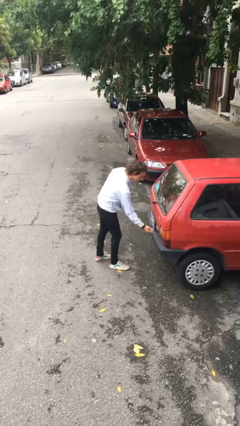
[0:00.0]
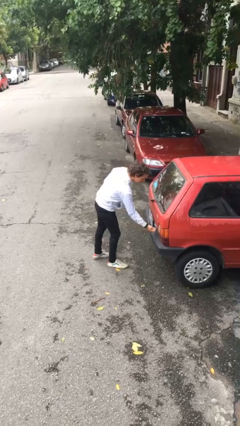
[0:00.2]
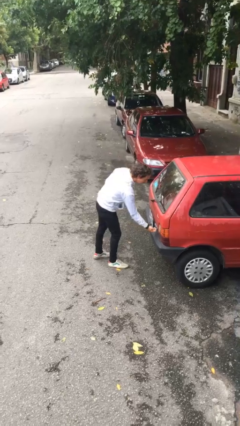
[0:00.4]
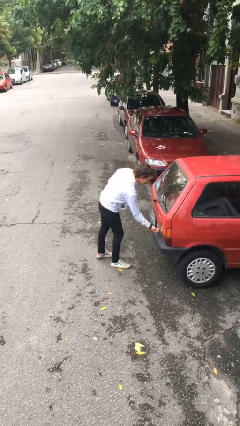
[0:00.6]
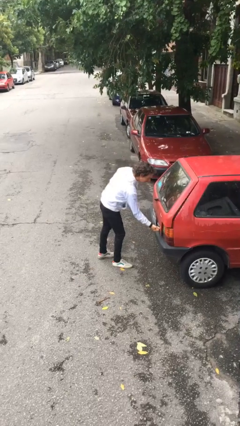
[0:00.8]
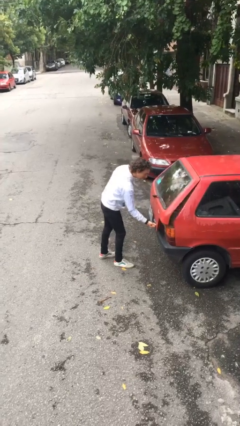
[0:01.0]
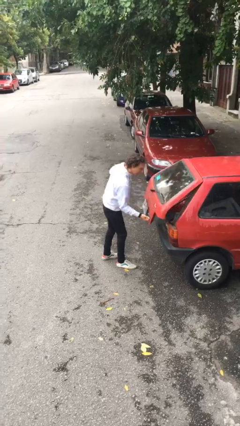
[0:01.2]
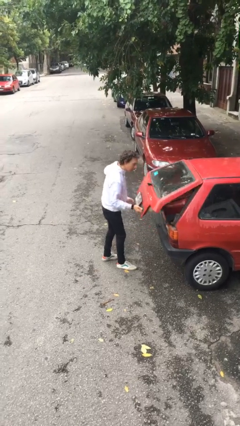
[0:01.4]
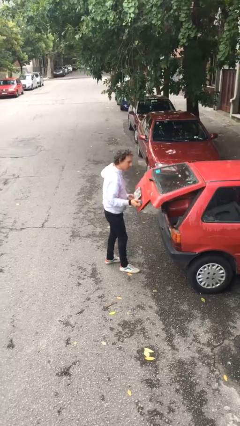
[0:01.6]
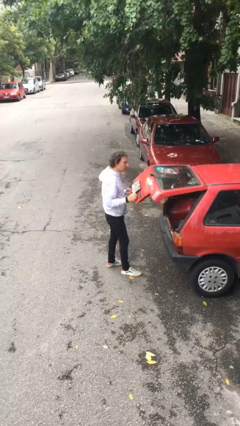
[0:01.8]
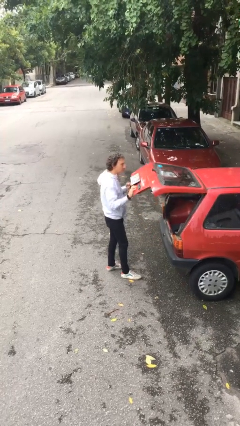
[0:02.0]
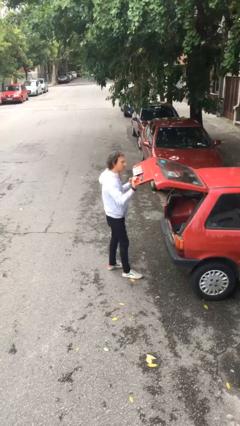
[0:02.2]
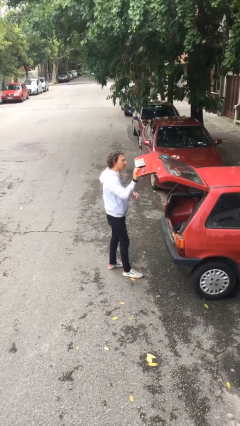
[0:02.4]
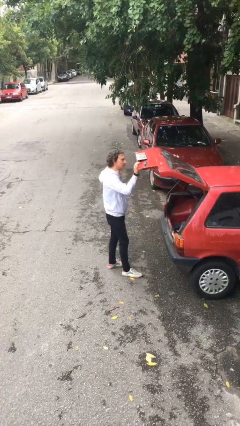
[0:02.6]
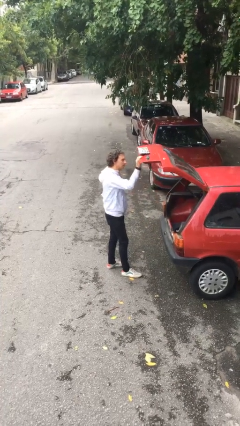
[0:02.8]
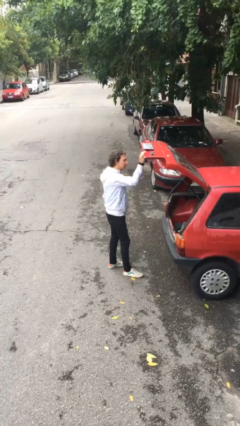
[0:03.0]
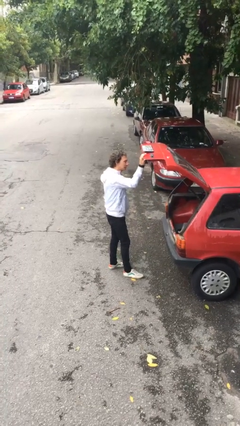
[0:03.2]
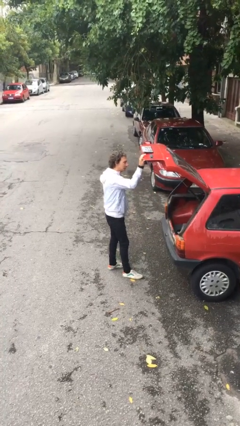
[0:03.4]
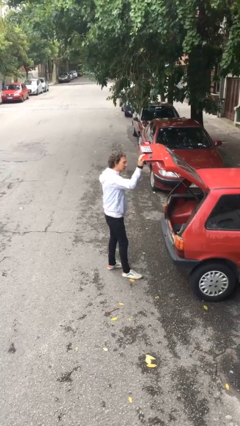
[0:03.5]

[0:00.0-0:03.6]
person opens car trunk

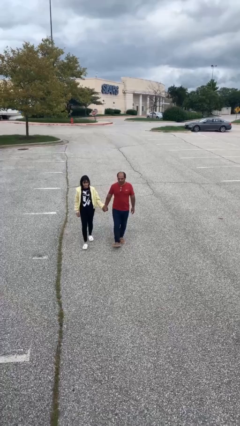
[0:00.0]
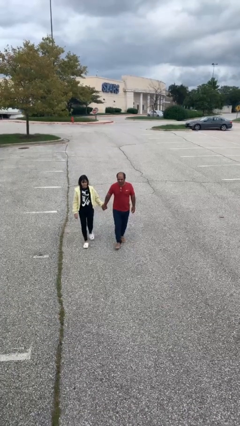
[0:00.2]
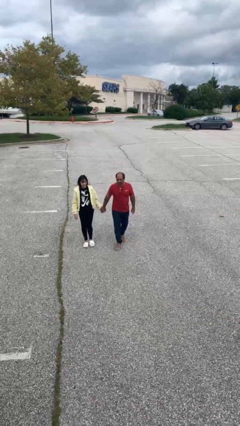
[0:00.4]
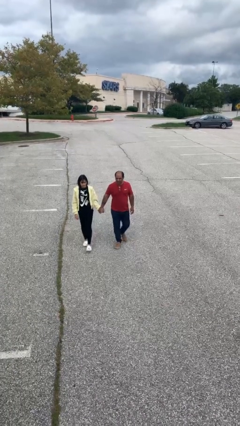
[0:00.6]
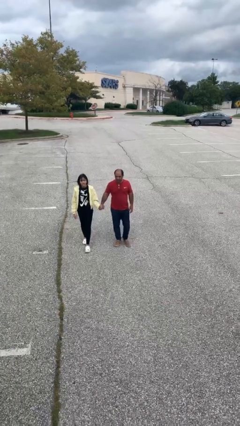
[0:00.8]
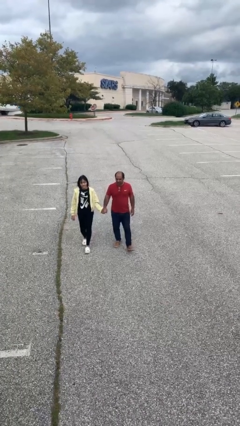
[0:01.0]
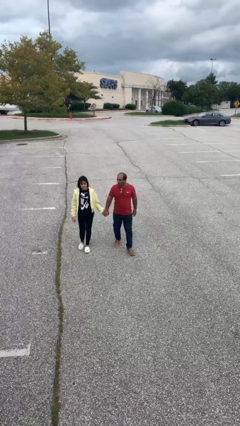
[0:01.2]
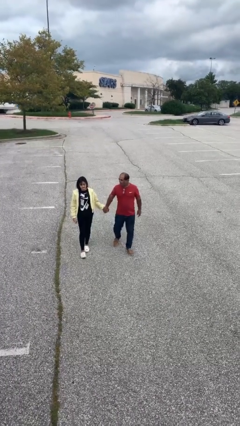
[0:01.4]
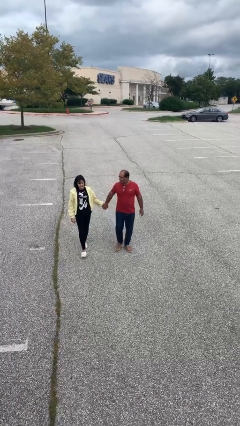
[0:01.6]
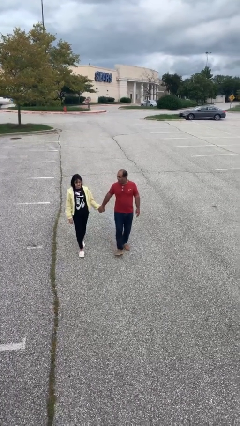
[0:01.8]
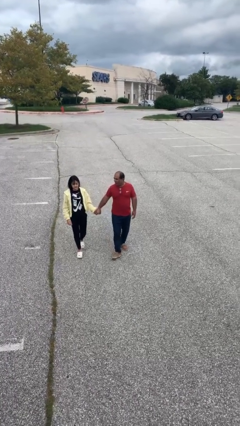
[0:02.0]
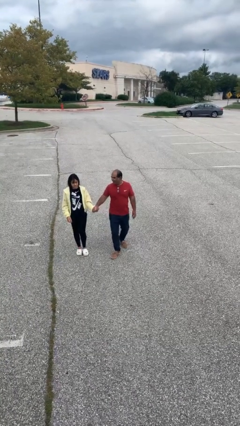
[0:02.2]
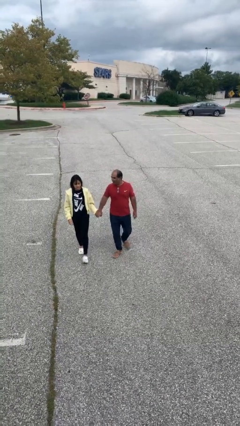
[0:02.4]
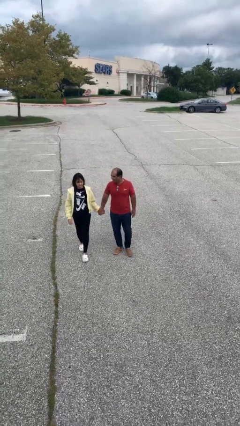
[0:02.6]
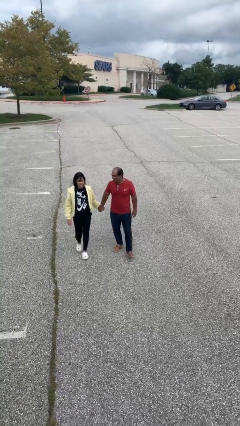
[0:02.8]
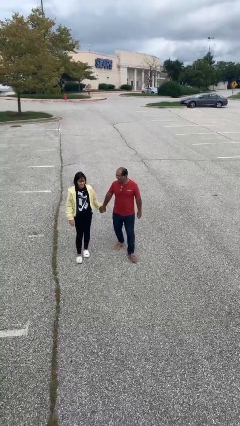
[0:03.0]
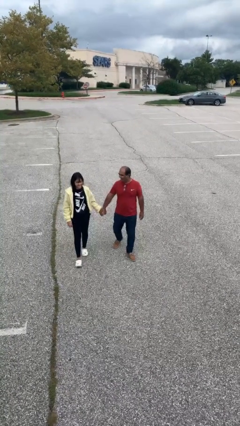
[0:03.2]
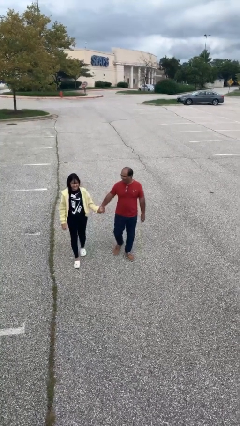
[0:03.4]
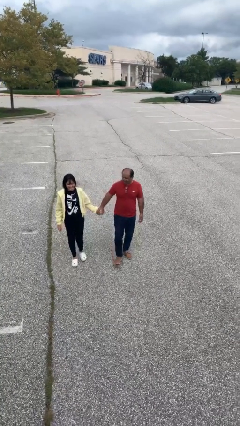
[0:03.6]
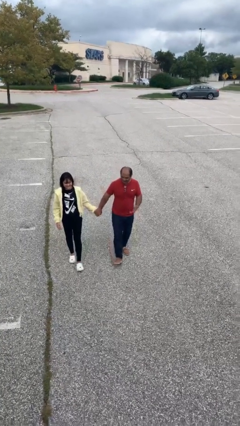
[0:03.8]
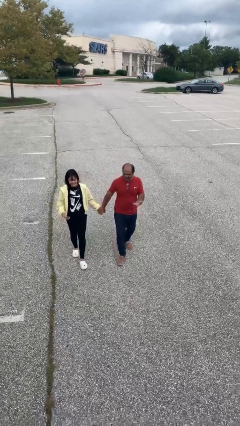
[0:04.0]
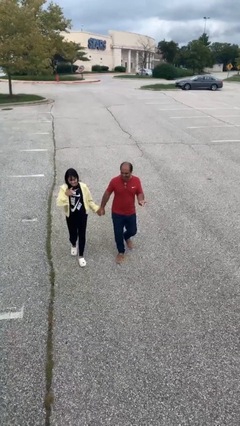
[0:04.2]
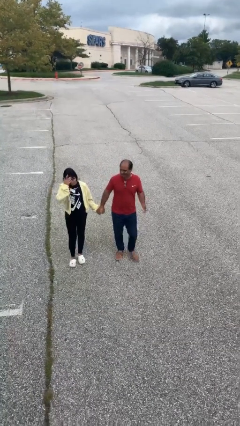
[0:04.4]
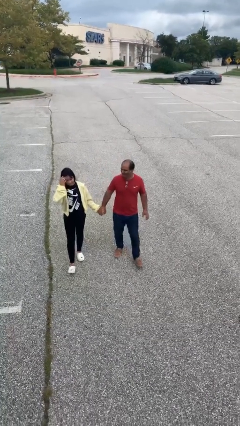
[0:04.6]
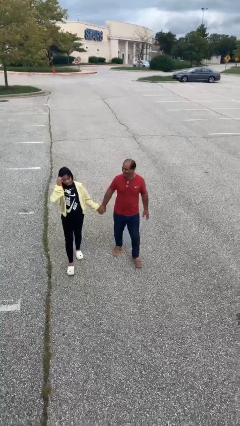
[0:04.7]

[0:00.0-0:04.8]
person holds hand

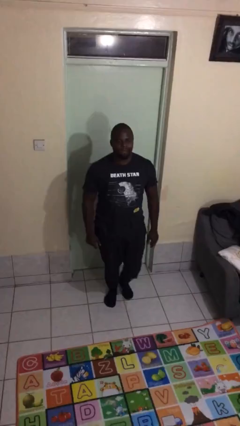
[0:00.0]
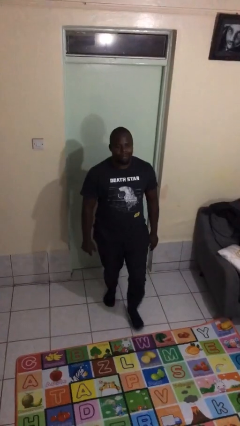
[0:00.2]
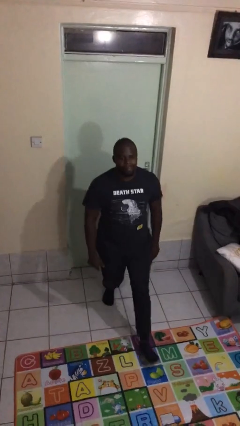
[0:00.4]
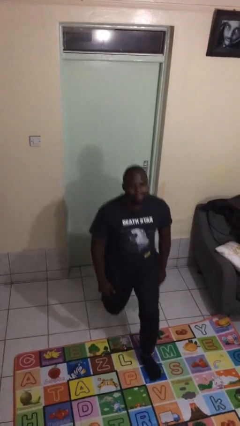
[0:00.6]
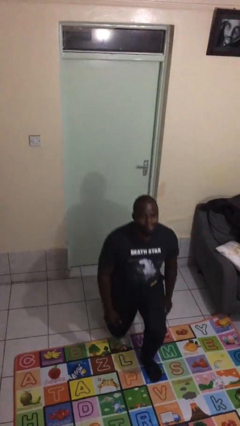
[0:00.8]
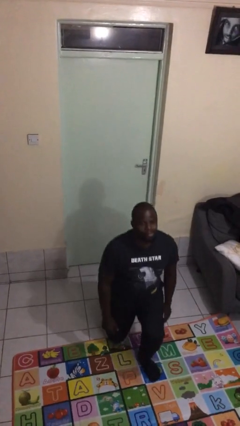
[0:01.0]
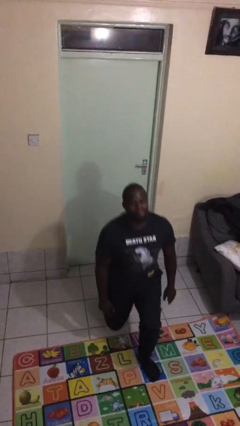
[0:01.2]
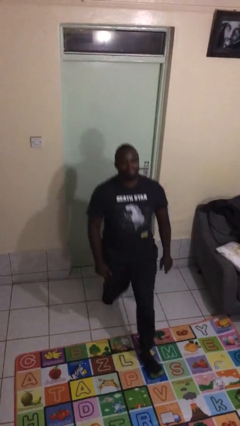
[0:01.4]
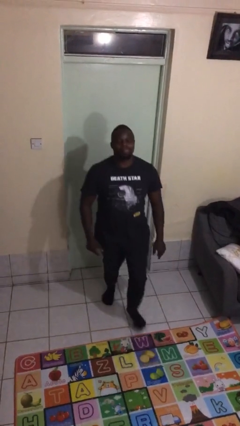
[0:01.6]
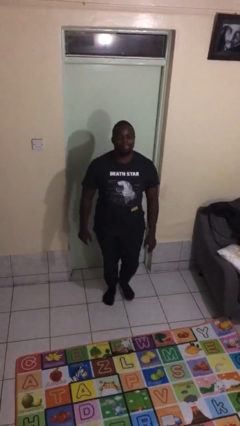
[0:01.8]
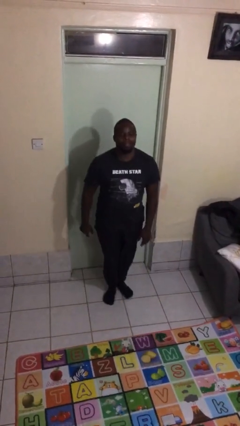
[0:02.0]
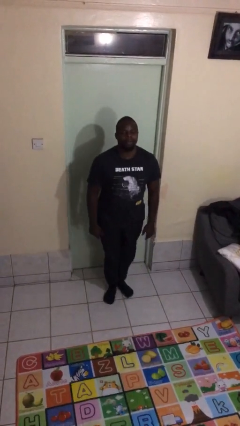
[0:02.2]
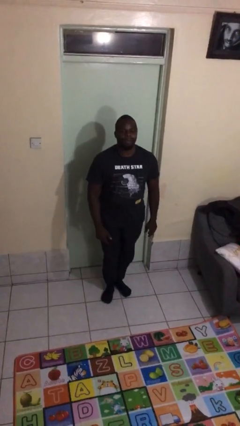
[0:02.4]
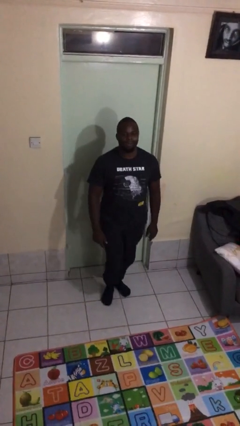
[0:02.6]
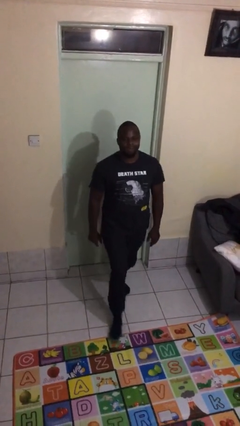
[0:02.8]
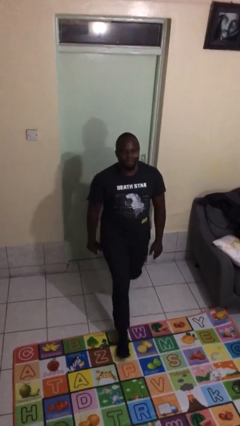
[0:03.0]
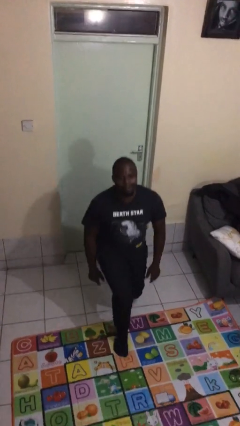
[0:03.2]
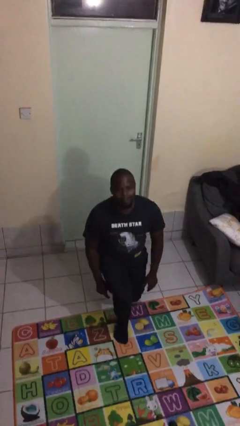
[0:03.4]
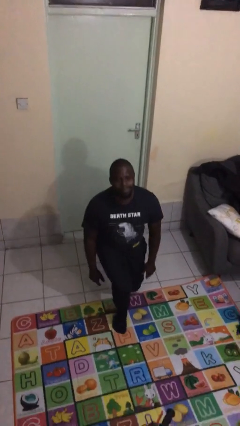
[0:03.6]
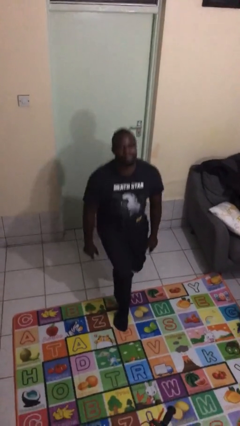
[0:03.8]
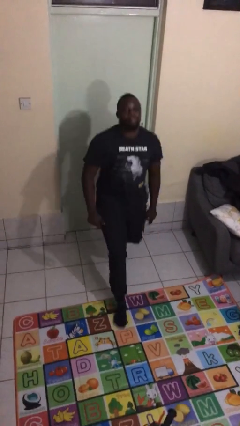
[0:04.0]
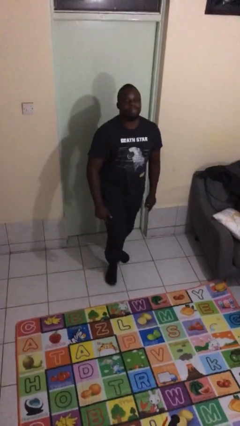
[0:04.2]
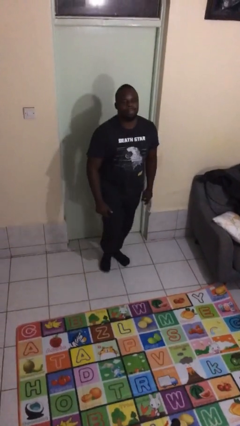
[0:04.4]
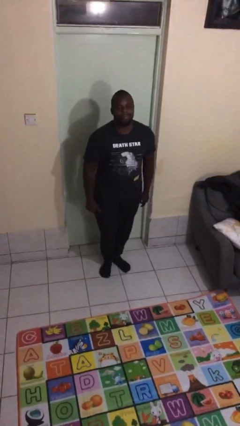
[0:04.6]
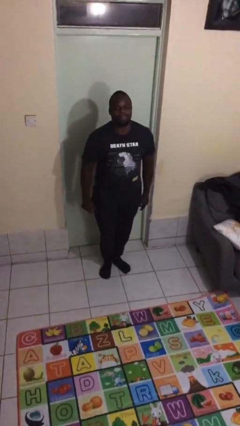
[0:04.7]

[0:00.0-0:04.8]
person exercises with lunges

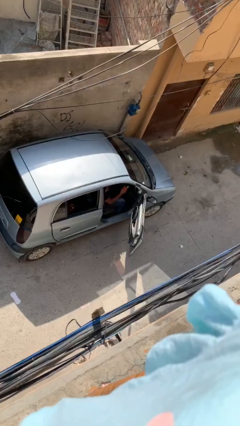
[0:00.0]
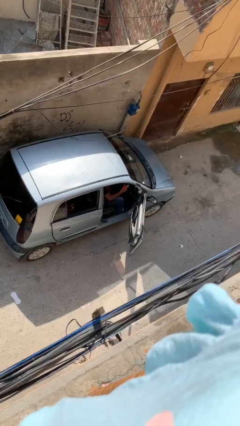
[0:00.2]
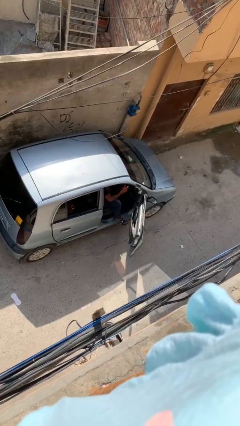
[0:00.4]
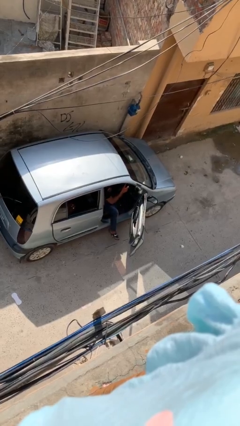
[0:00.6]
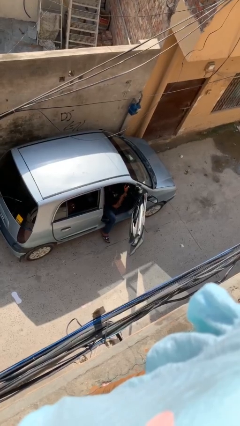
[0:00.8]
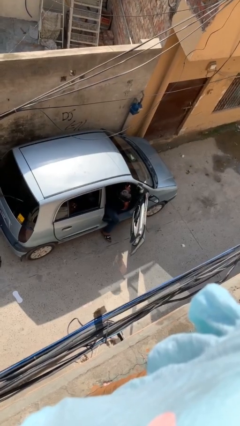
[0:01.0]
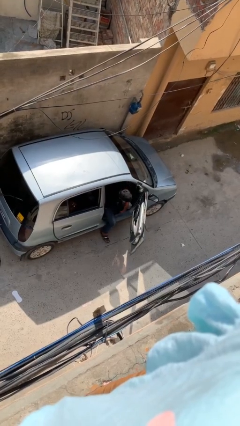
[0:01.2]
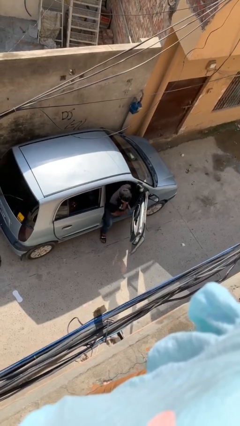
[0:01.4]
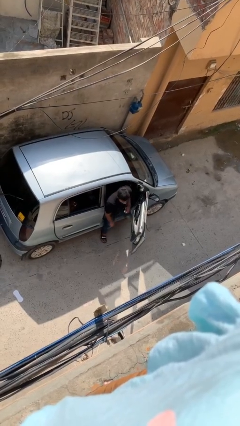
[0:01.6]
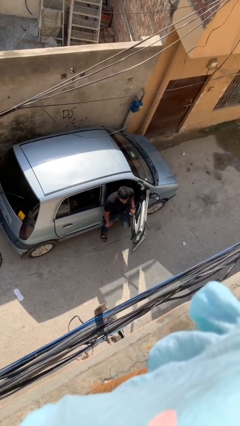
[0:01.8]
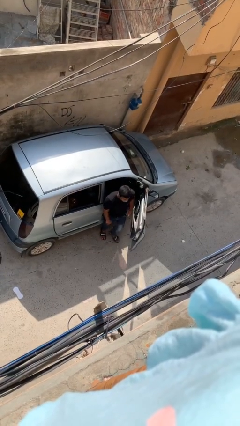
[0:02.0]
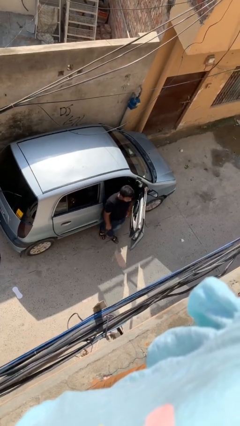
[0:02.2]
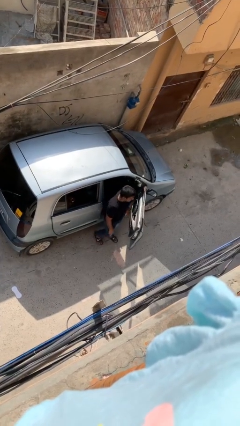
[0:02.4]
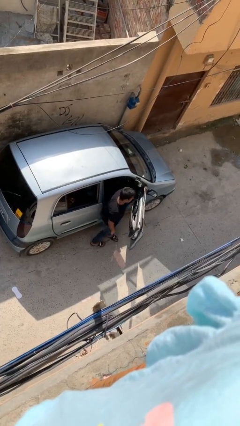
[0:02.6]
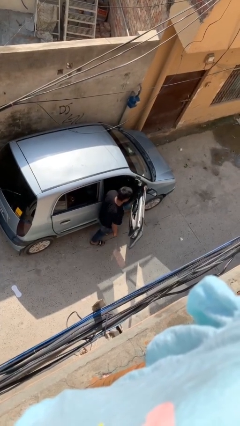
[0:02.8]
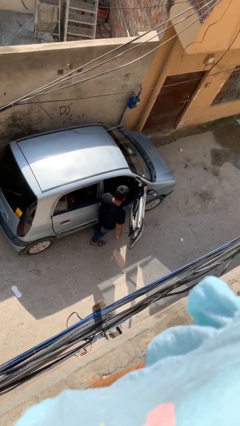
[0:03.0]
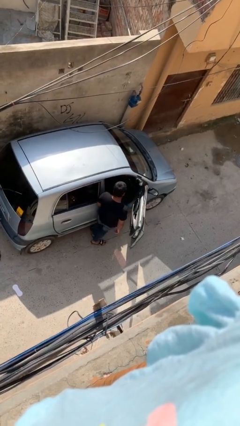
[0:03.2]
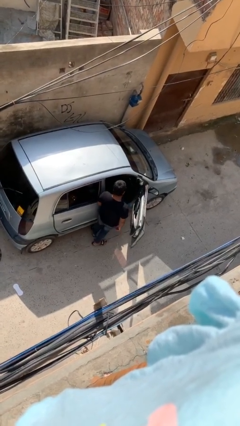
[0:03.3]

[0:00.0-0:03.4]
person exits car

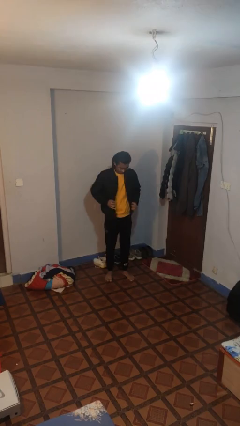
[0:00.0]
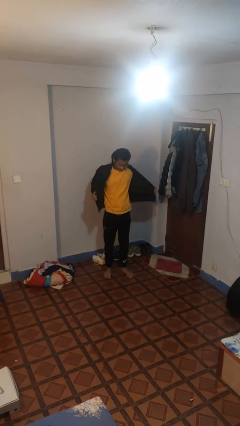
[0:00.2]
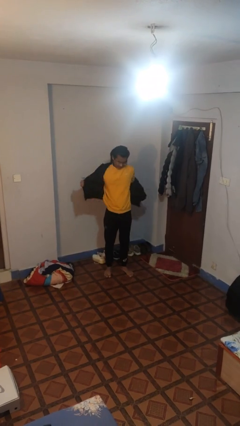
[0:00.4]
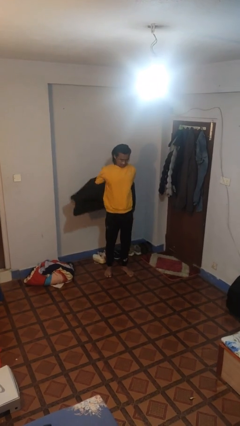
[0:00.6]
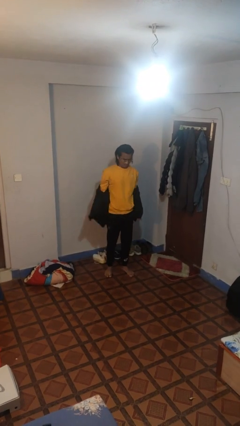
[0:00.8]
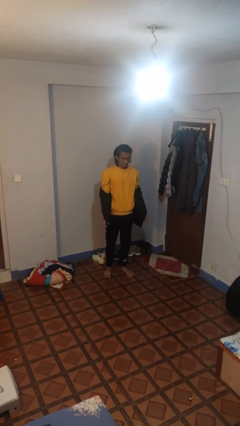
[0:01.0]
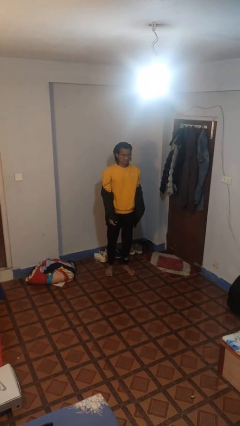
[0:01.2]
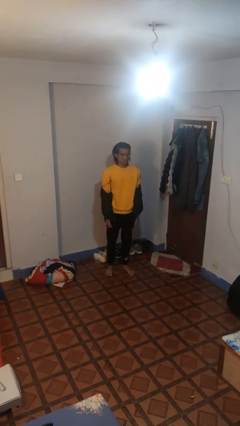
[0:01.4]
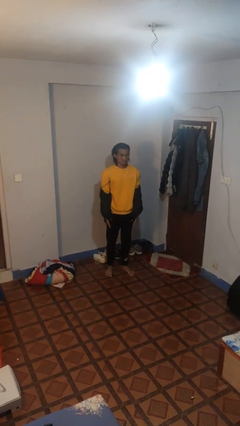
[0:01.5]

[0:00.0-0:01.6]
person takes off jacket
